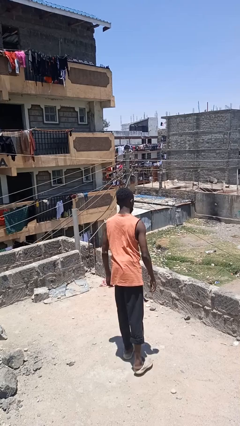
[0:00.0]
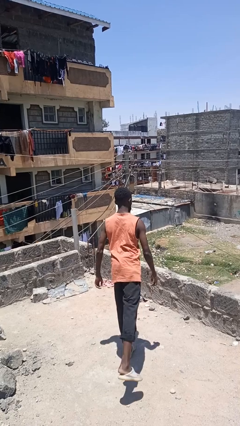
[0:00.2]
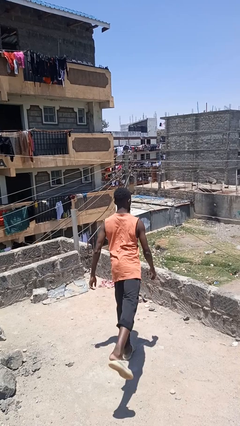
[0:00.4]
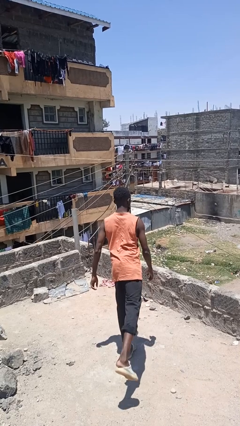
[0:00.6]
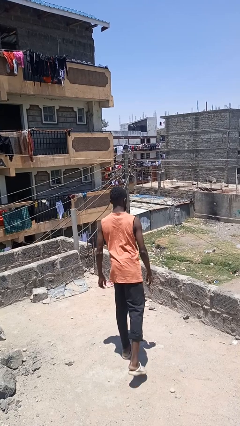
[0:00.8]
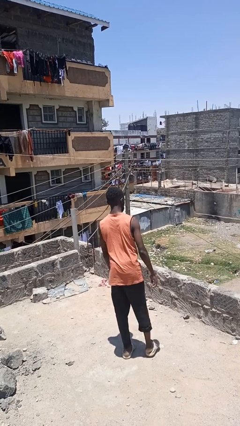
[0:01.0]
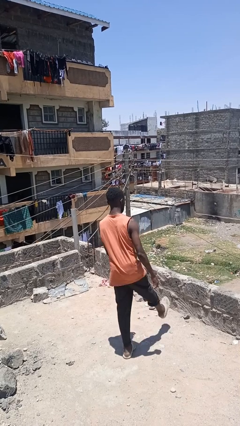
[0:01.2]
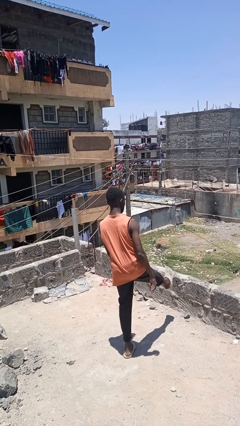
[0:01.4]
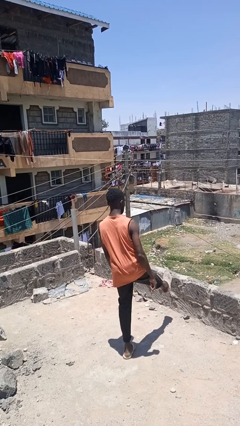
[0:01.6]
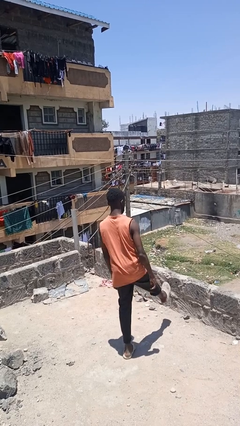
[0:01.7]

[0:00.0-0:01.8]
person wiggles hips

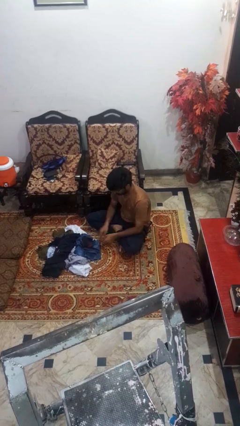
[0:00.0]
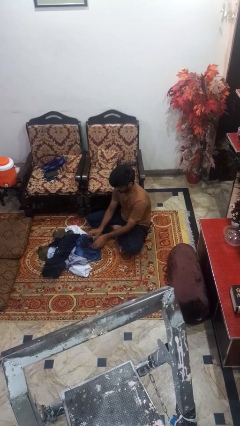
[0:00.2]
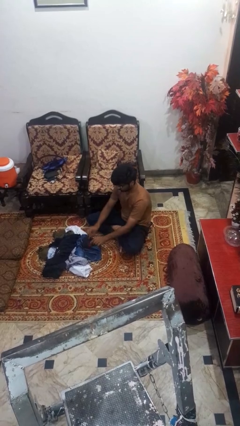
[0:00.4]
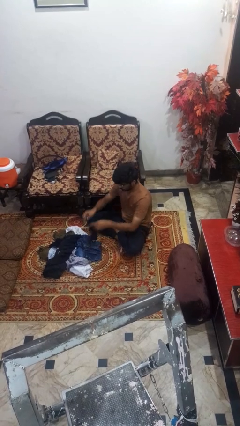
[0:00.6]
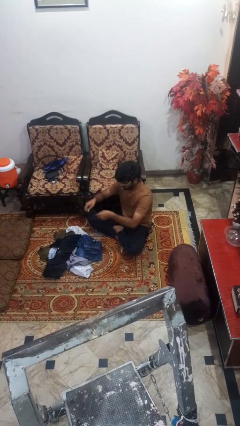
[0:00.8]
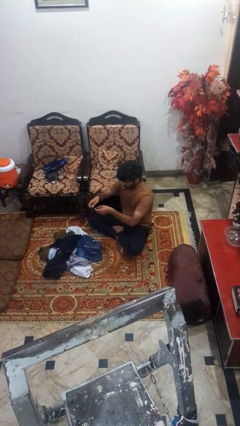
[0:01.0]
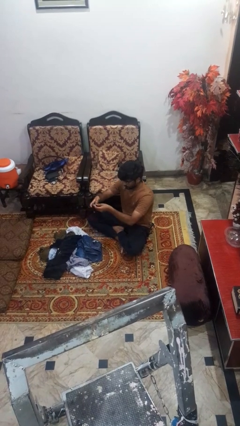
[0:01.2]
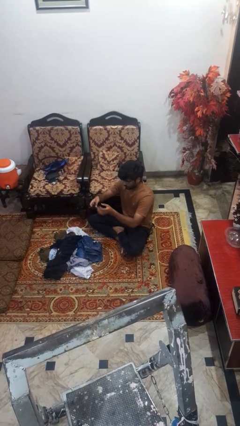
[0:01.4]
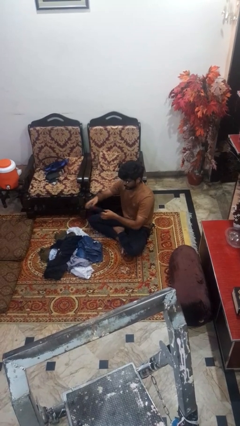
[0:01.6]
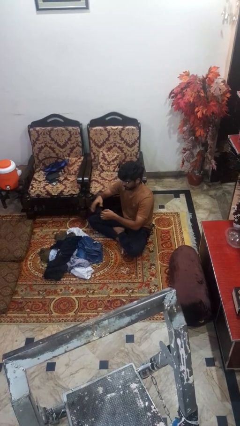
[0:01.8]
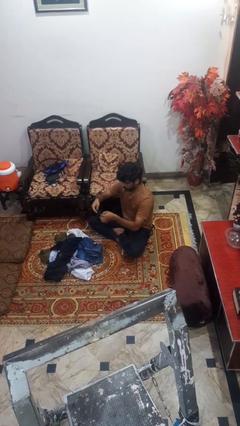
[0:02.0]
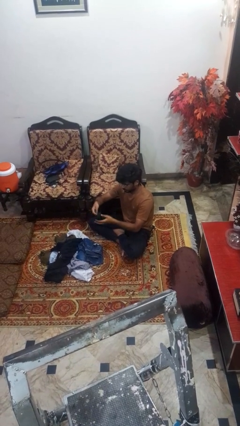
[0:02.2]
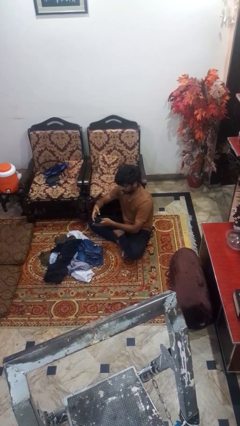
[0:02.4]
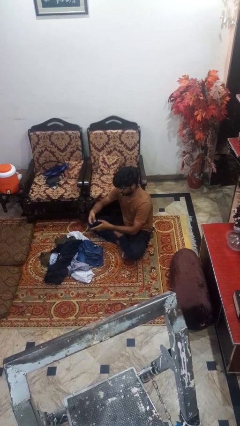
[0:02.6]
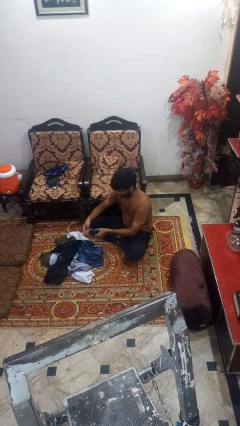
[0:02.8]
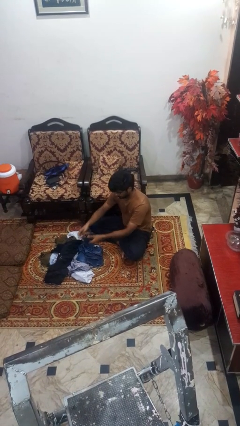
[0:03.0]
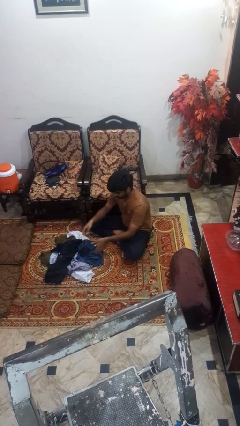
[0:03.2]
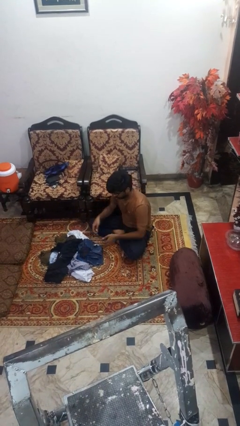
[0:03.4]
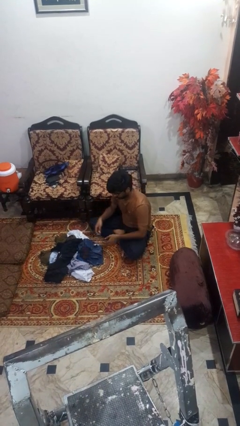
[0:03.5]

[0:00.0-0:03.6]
person folds socks

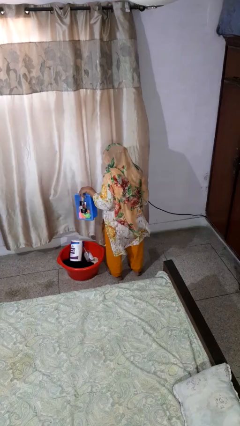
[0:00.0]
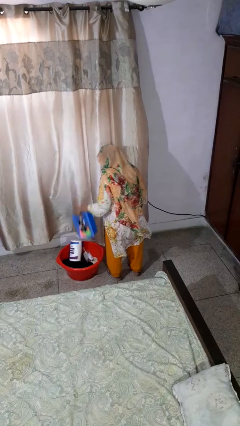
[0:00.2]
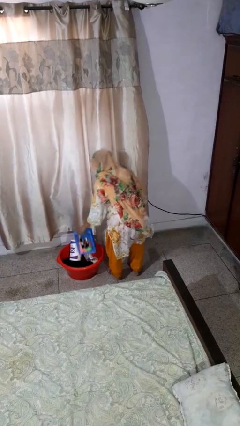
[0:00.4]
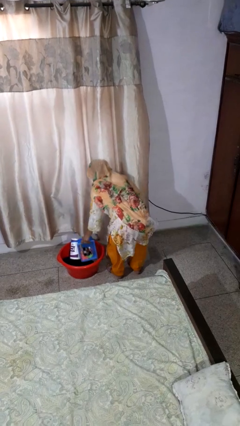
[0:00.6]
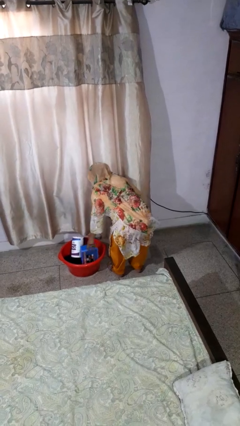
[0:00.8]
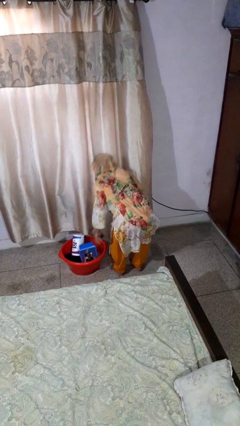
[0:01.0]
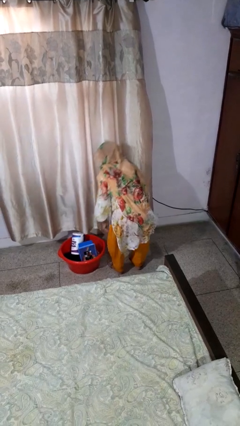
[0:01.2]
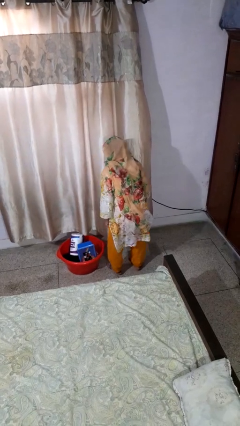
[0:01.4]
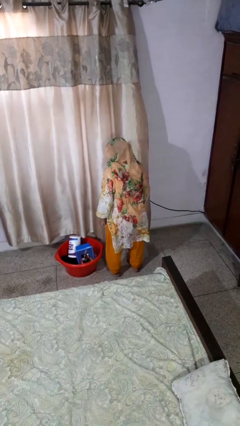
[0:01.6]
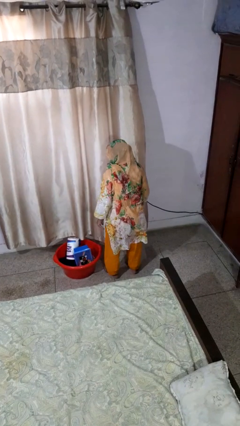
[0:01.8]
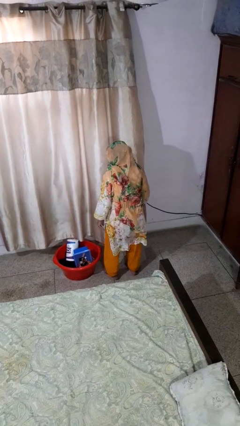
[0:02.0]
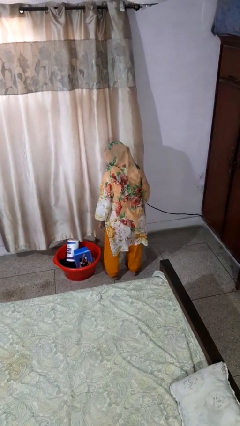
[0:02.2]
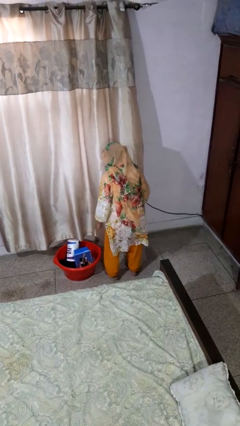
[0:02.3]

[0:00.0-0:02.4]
person puts object into basket

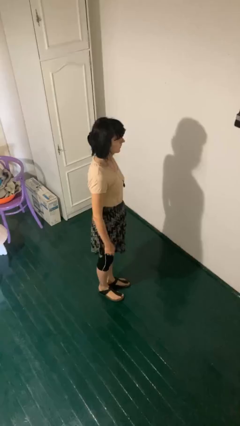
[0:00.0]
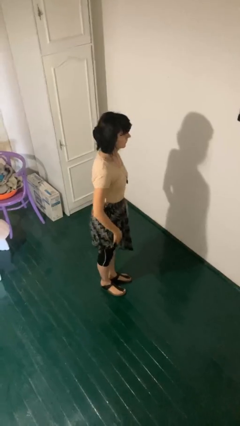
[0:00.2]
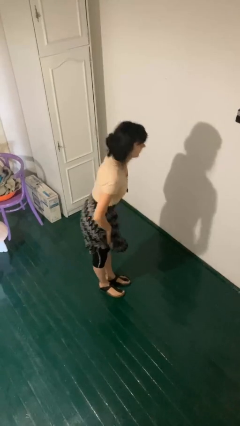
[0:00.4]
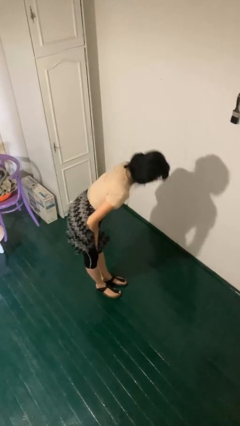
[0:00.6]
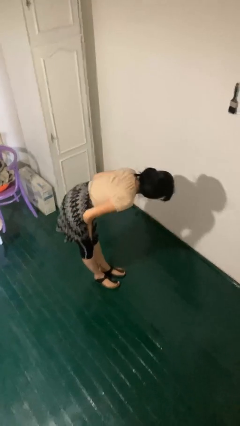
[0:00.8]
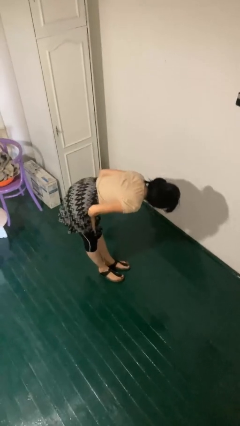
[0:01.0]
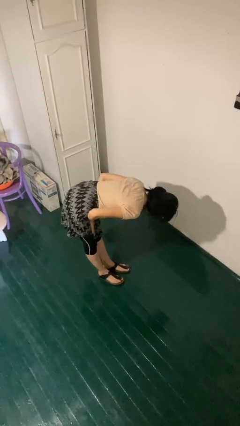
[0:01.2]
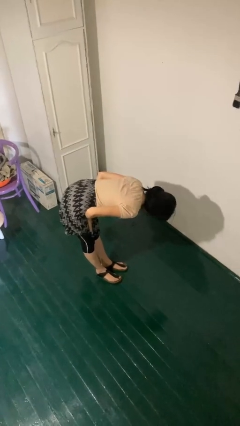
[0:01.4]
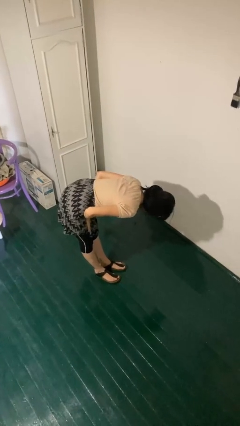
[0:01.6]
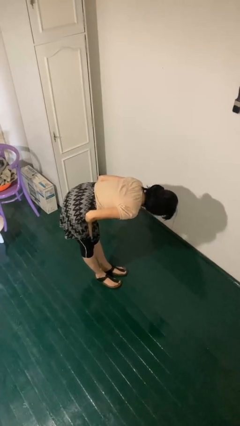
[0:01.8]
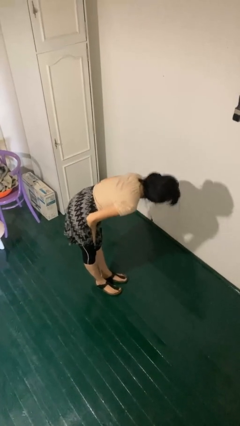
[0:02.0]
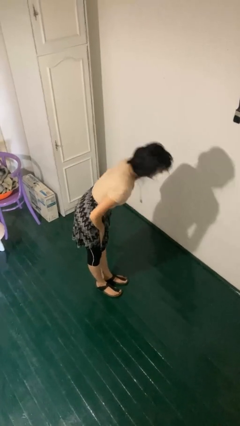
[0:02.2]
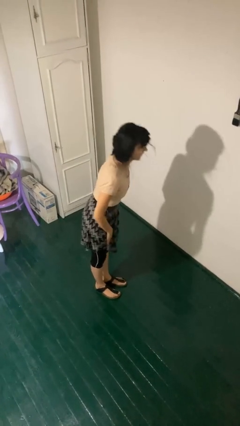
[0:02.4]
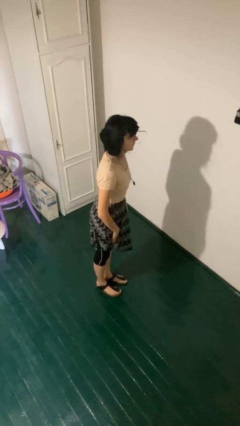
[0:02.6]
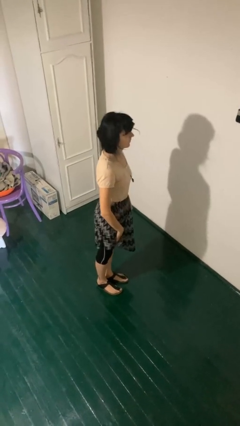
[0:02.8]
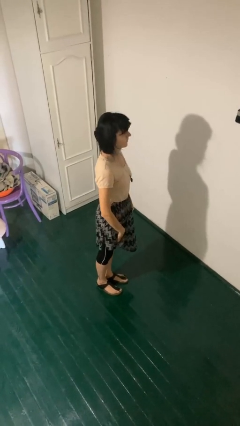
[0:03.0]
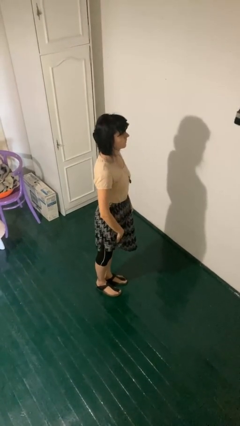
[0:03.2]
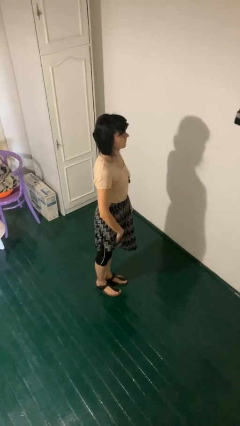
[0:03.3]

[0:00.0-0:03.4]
person bows

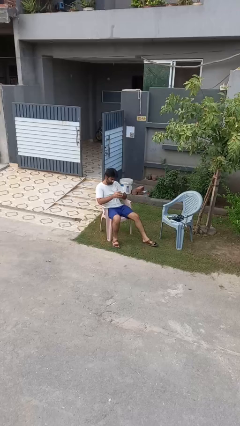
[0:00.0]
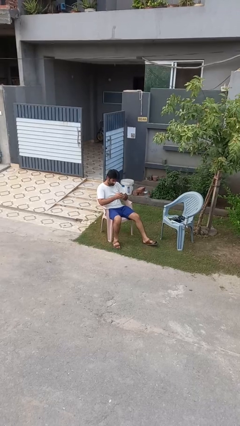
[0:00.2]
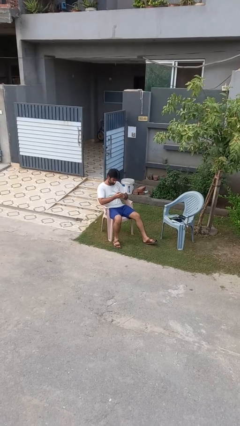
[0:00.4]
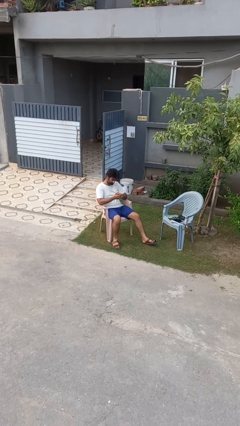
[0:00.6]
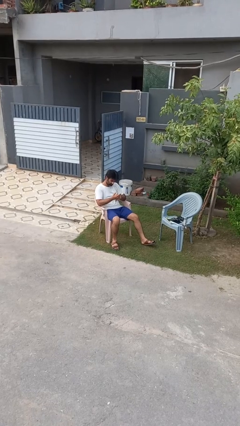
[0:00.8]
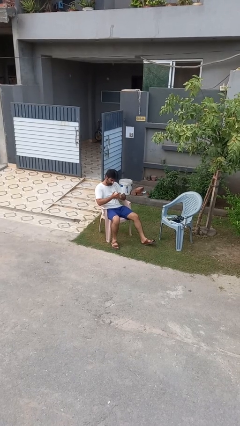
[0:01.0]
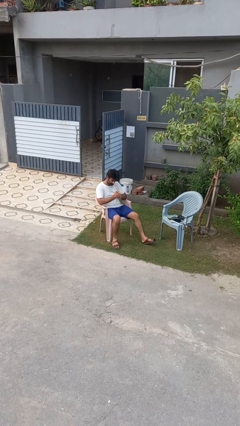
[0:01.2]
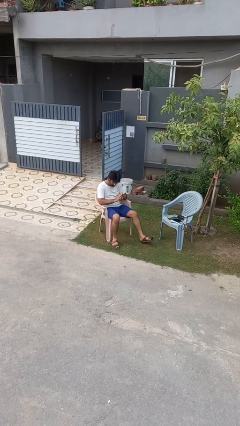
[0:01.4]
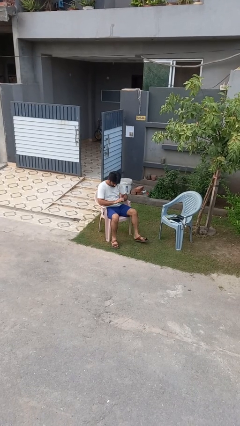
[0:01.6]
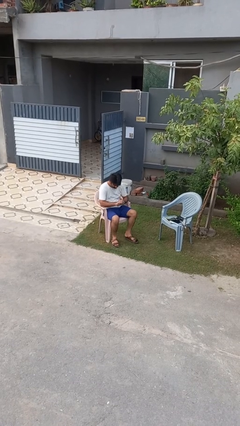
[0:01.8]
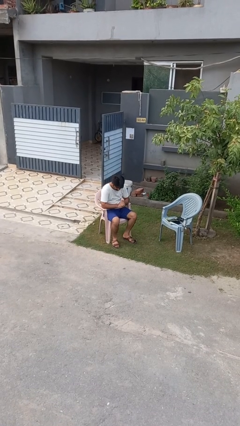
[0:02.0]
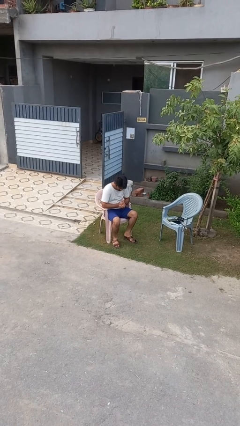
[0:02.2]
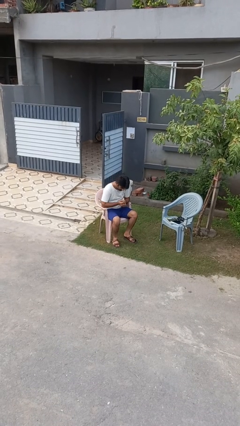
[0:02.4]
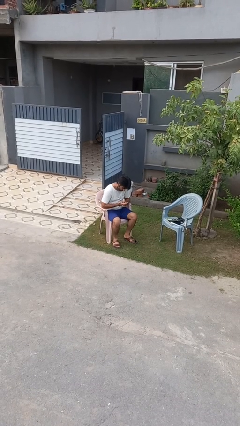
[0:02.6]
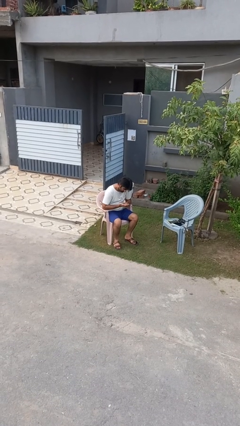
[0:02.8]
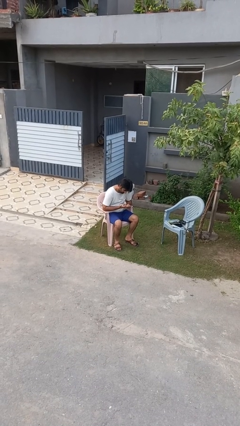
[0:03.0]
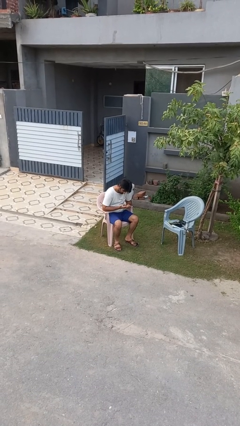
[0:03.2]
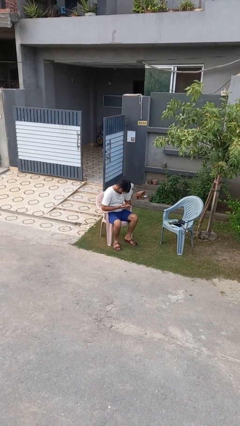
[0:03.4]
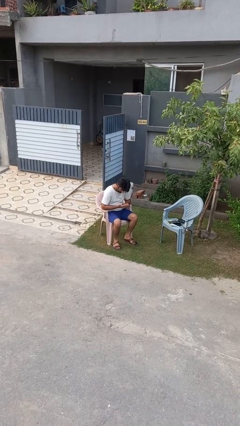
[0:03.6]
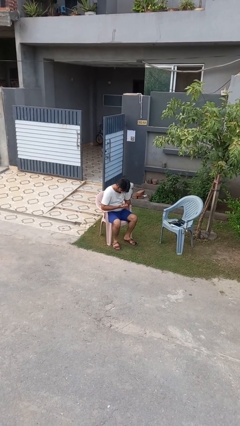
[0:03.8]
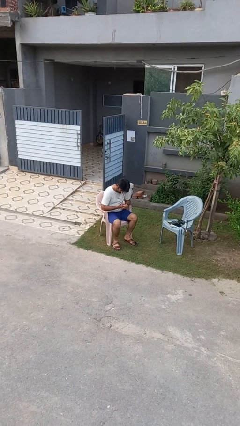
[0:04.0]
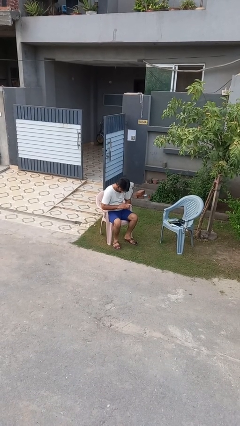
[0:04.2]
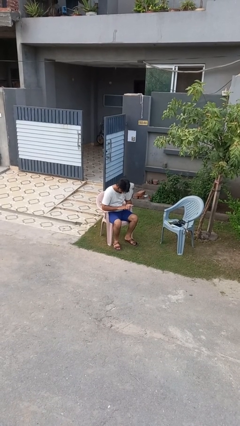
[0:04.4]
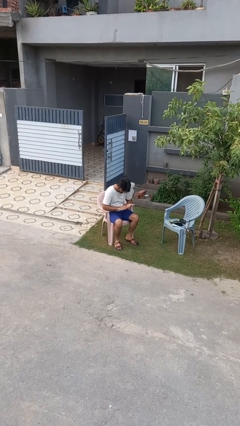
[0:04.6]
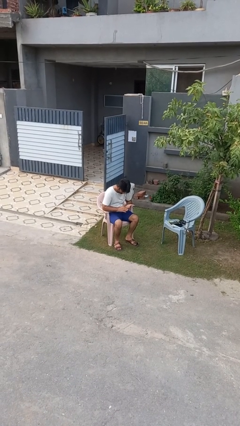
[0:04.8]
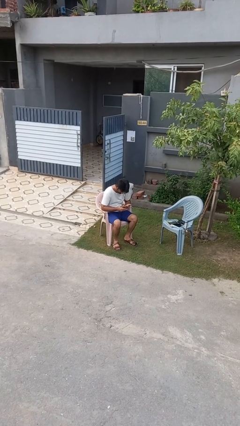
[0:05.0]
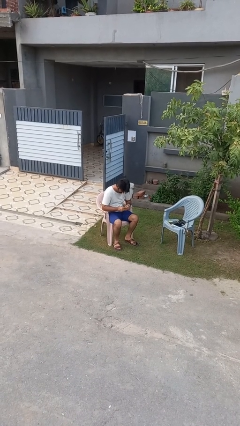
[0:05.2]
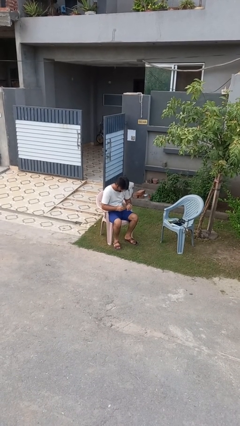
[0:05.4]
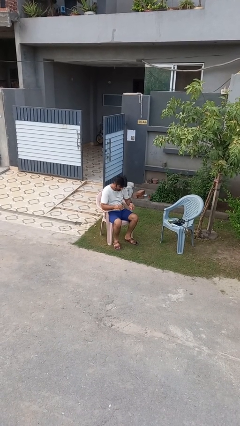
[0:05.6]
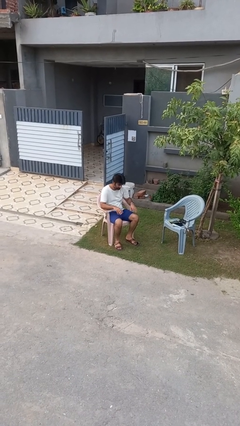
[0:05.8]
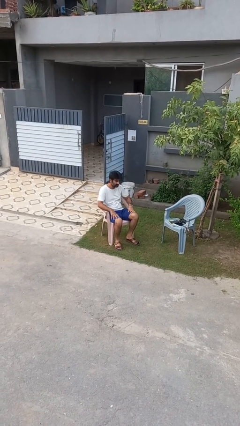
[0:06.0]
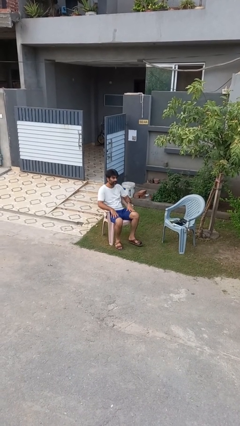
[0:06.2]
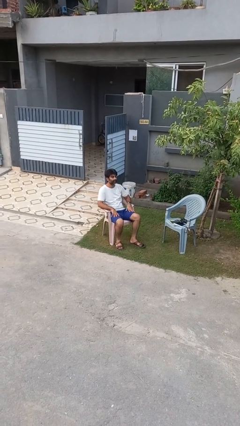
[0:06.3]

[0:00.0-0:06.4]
person looks at hands in lap
